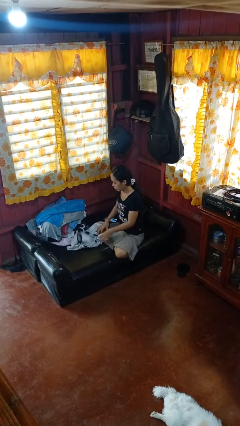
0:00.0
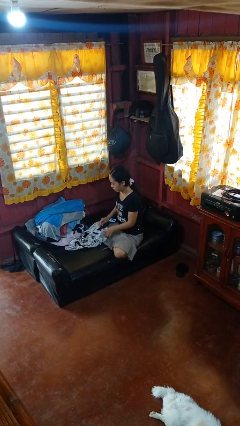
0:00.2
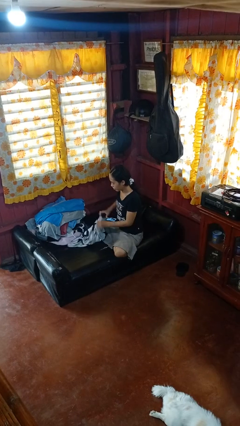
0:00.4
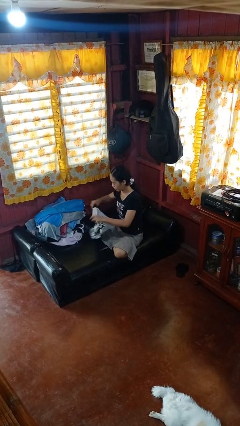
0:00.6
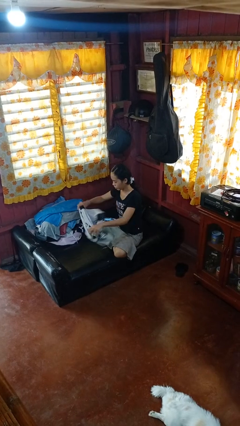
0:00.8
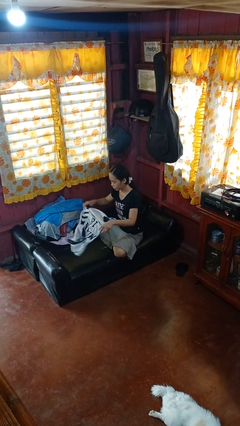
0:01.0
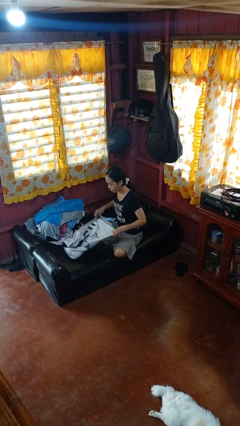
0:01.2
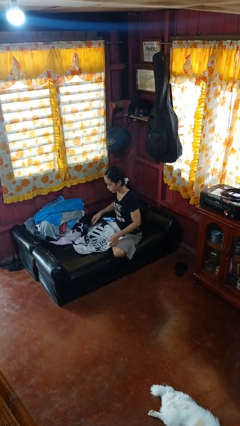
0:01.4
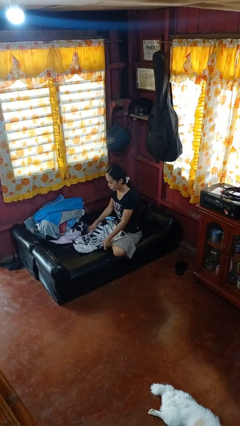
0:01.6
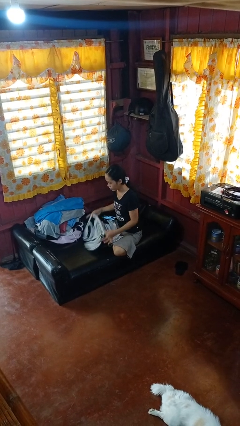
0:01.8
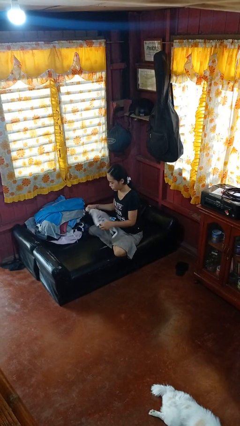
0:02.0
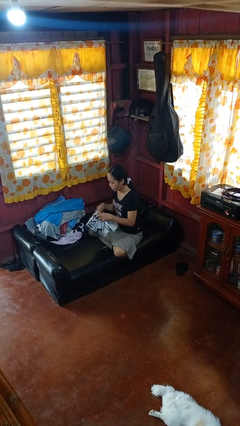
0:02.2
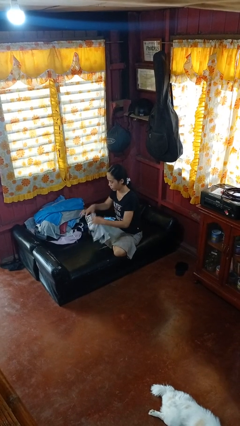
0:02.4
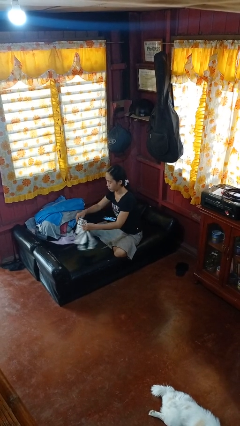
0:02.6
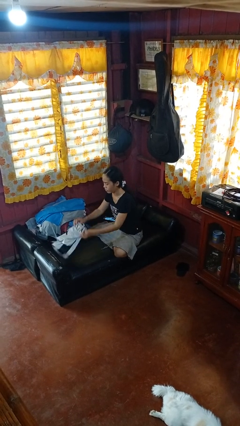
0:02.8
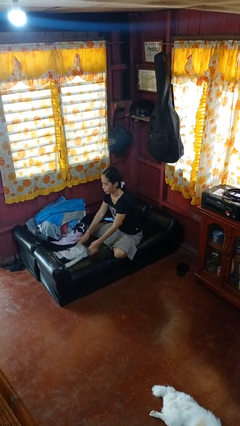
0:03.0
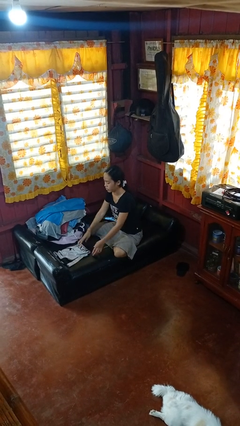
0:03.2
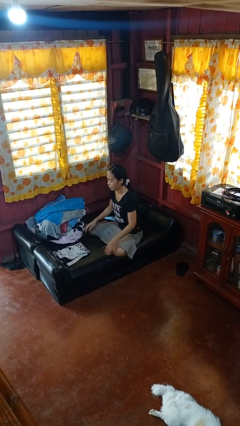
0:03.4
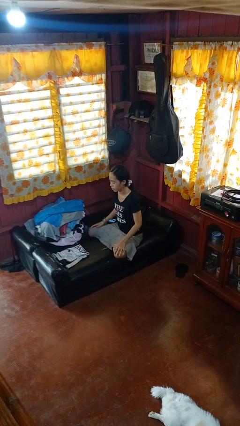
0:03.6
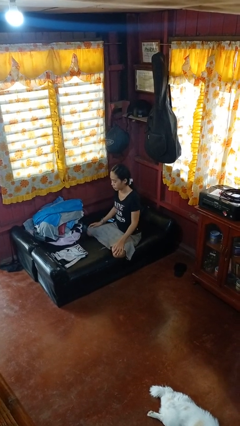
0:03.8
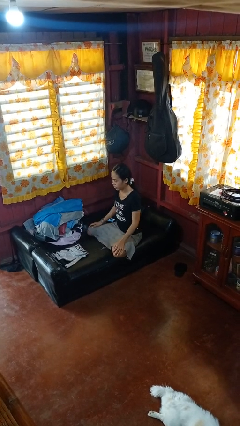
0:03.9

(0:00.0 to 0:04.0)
person folds shirt

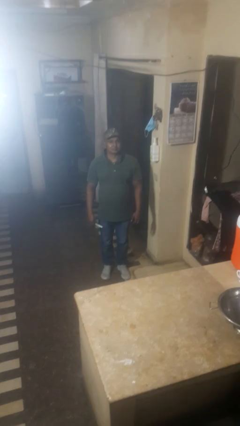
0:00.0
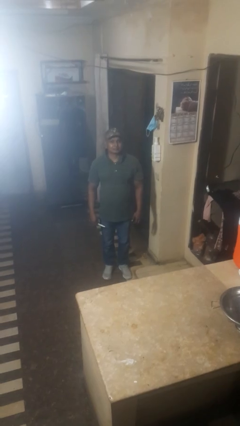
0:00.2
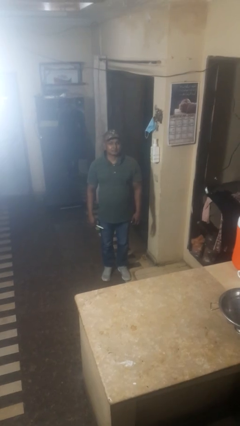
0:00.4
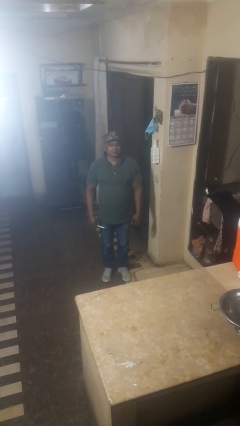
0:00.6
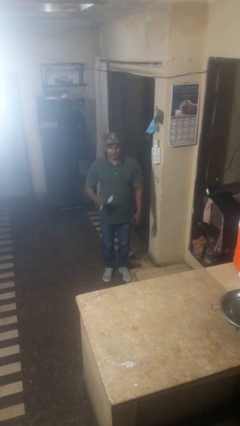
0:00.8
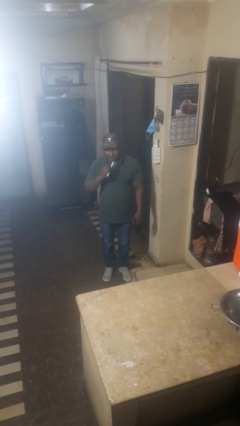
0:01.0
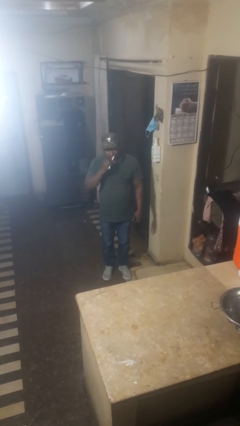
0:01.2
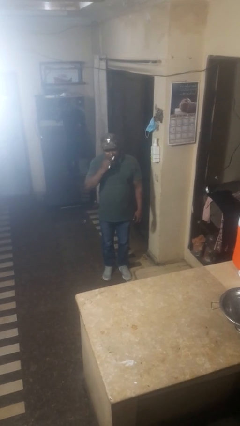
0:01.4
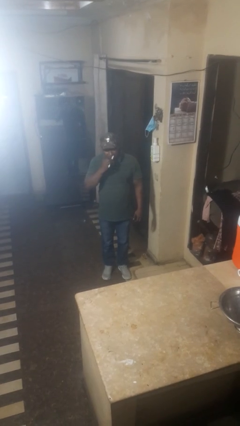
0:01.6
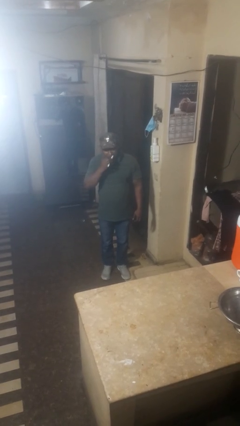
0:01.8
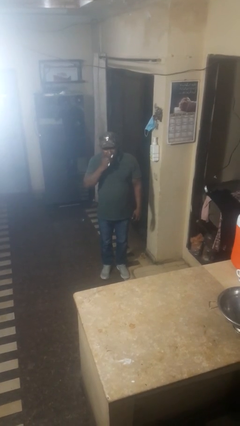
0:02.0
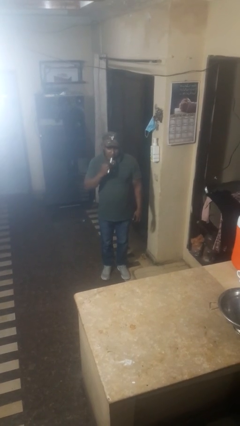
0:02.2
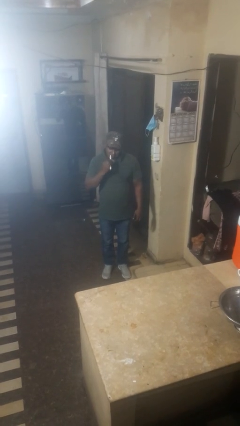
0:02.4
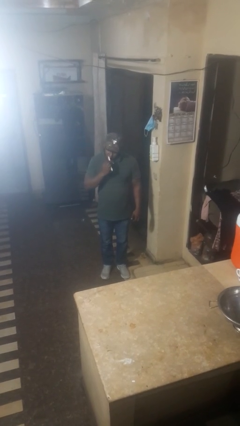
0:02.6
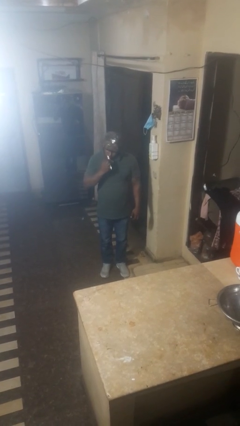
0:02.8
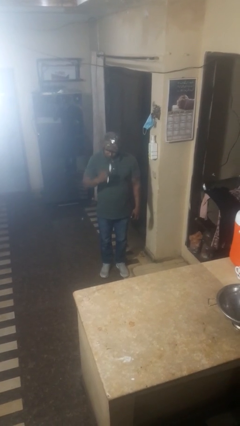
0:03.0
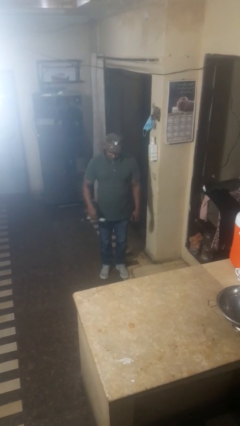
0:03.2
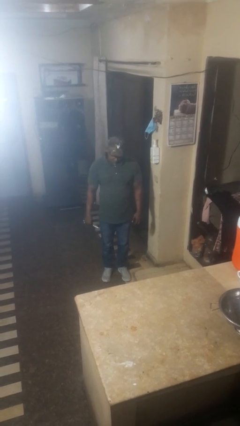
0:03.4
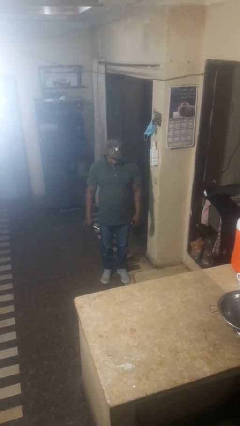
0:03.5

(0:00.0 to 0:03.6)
person brushes teeth

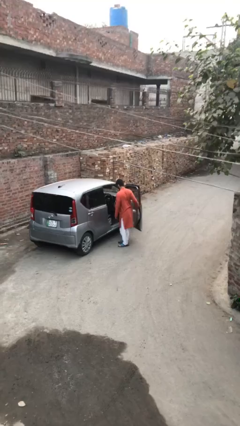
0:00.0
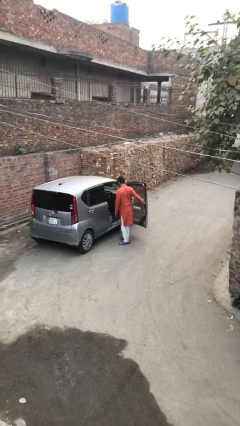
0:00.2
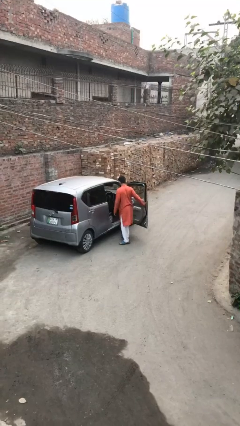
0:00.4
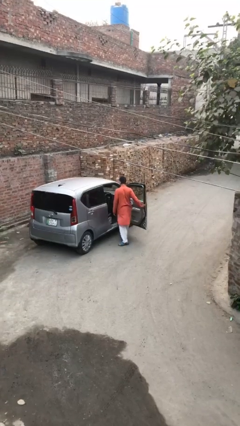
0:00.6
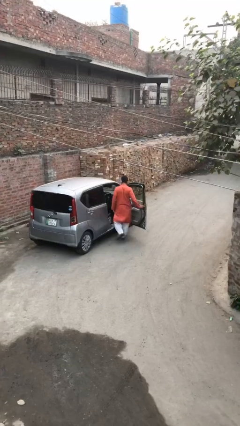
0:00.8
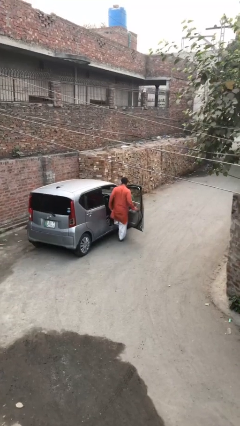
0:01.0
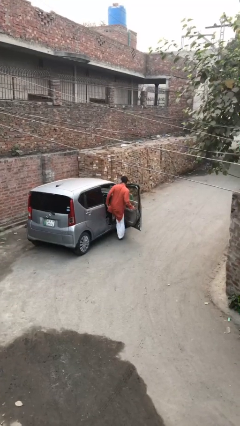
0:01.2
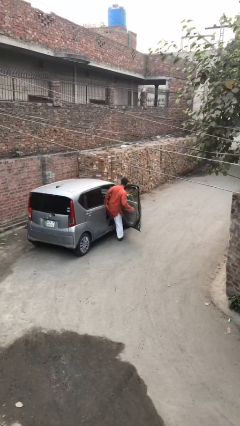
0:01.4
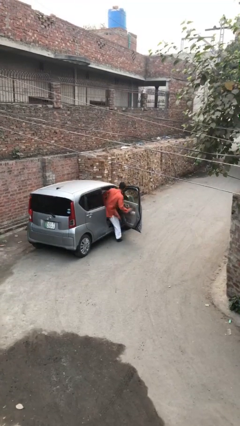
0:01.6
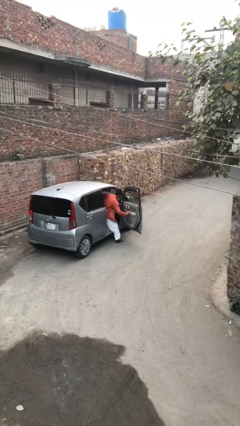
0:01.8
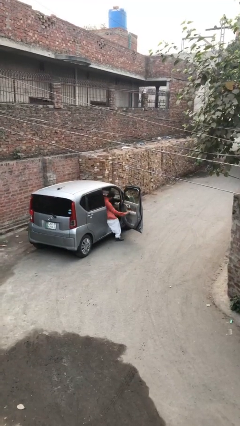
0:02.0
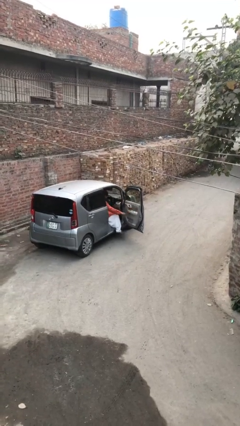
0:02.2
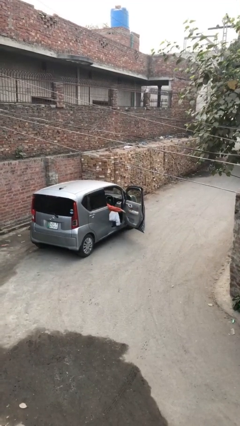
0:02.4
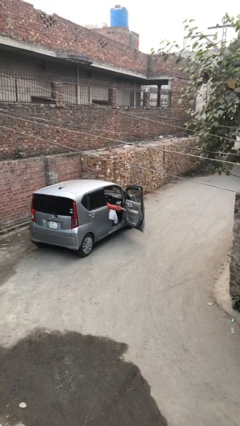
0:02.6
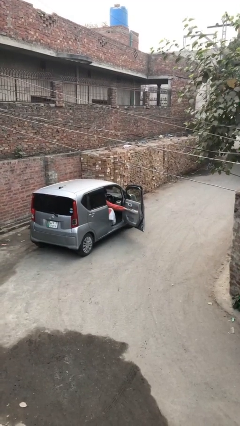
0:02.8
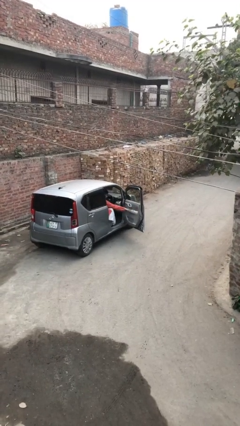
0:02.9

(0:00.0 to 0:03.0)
person enters car

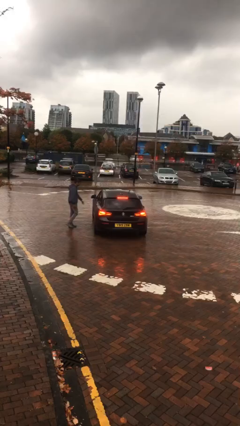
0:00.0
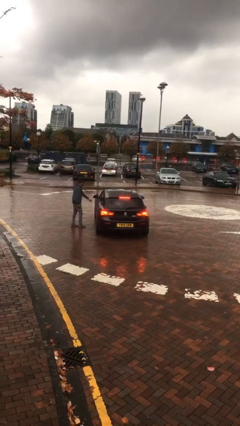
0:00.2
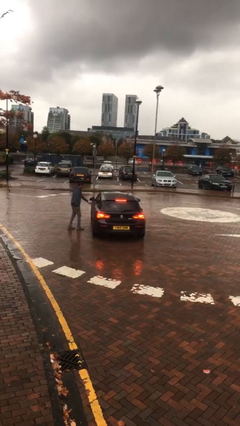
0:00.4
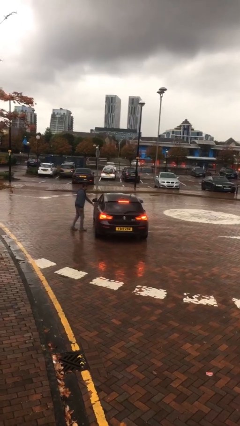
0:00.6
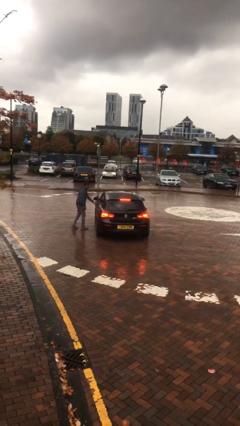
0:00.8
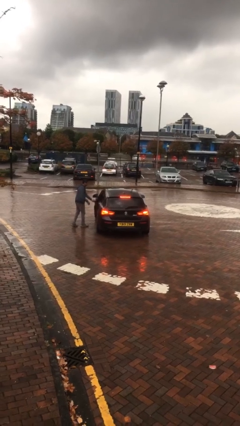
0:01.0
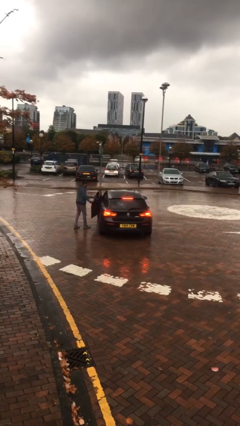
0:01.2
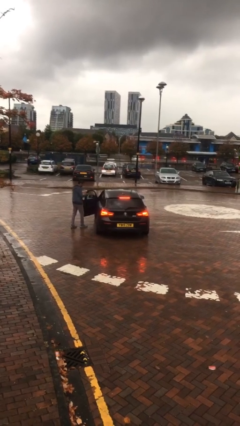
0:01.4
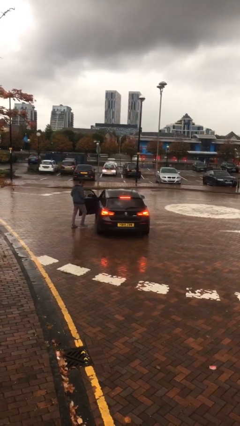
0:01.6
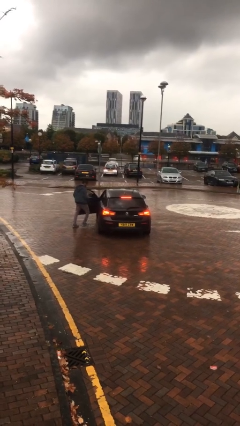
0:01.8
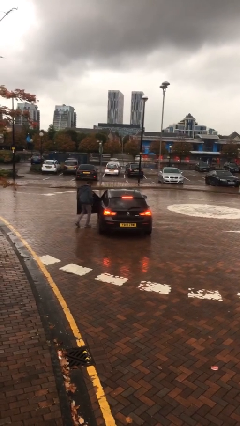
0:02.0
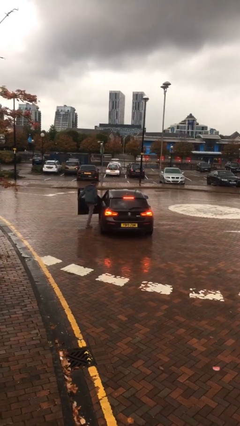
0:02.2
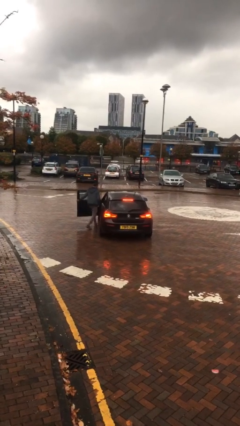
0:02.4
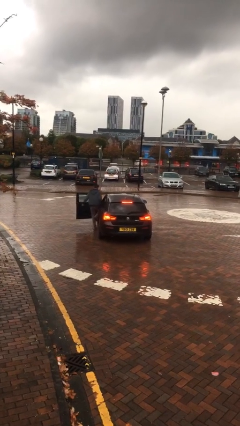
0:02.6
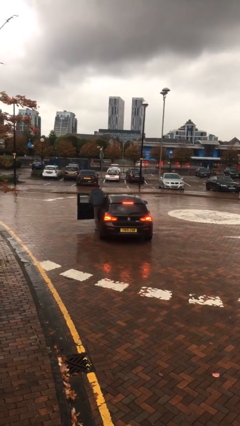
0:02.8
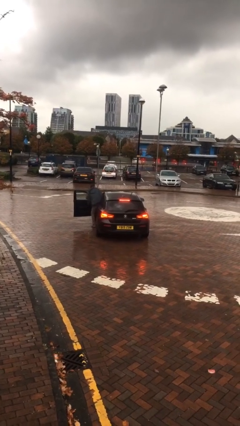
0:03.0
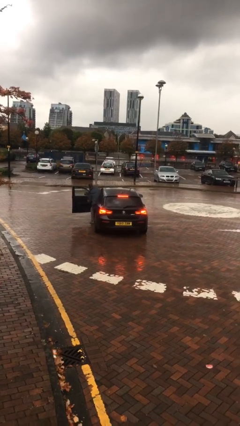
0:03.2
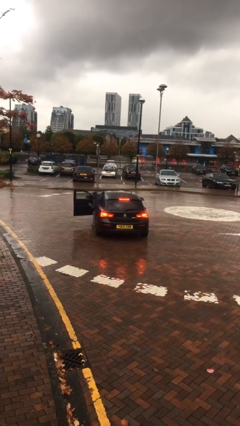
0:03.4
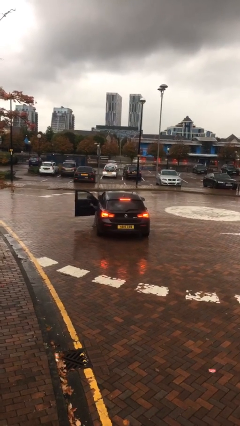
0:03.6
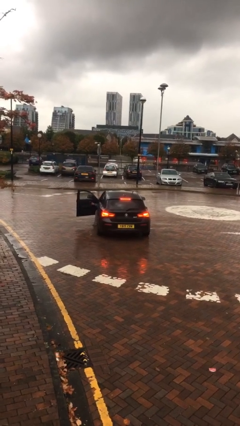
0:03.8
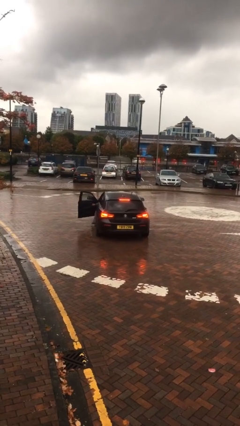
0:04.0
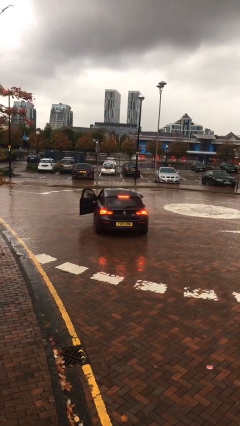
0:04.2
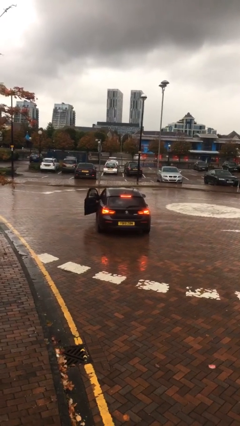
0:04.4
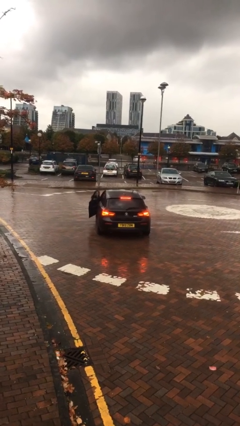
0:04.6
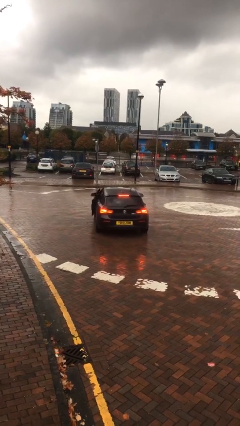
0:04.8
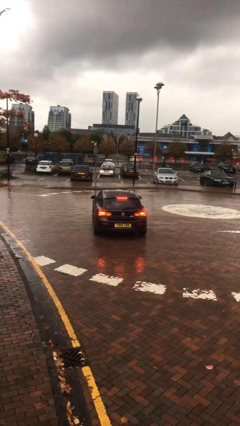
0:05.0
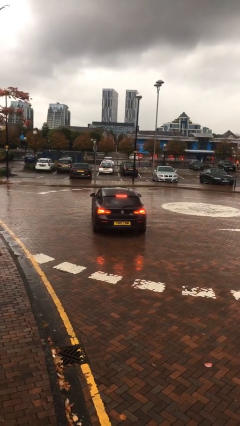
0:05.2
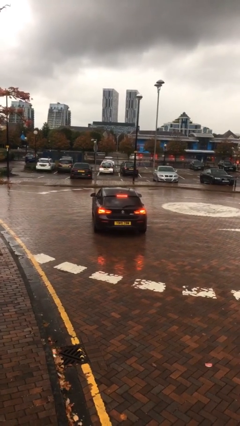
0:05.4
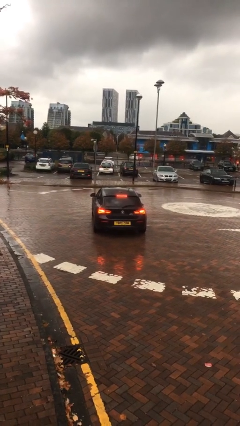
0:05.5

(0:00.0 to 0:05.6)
car picks up person

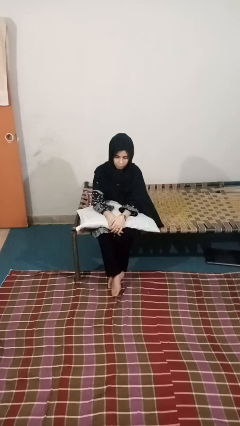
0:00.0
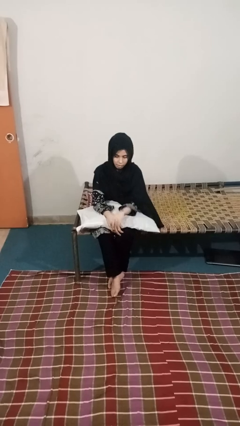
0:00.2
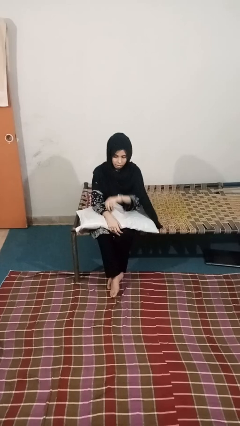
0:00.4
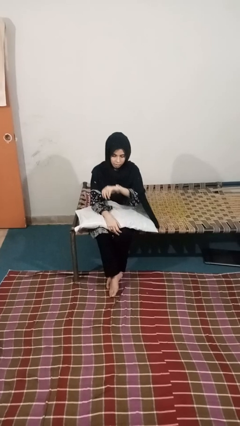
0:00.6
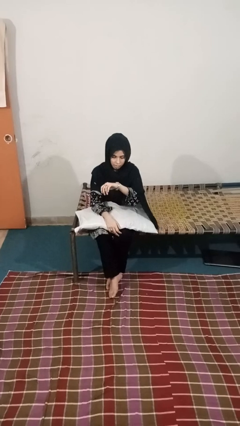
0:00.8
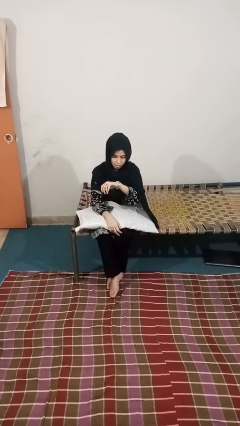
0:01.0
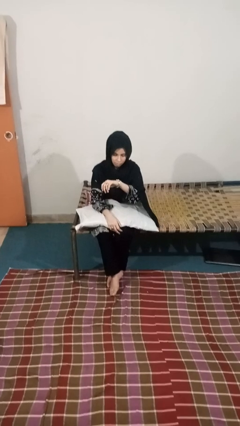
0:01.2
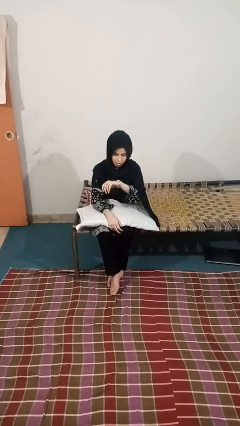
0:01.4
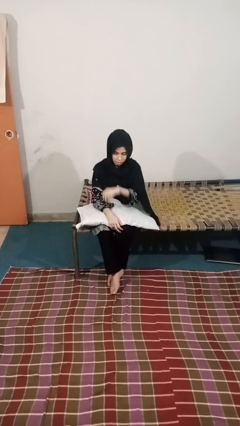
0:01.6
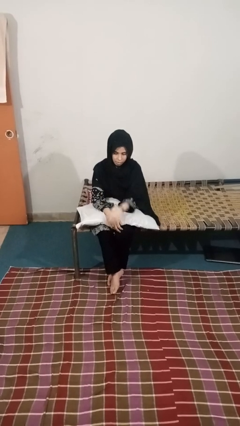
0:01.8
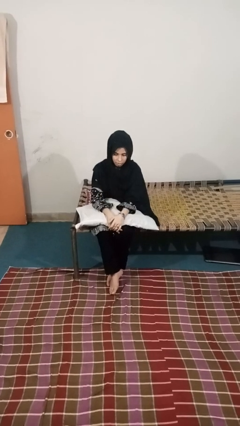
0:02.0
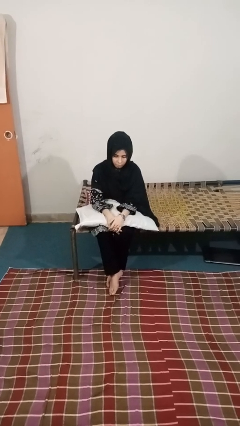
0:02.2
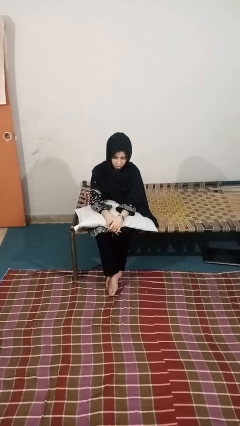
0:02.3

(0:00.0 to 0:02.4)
person looks at wristwatch
